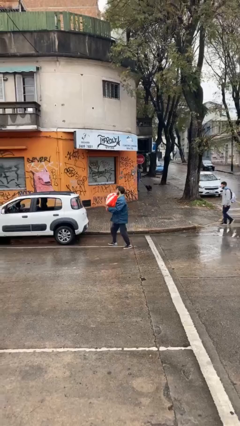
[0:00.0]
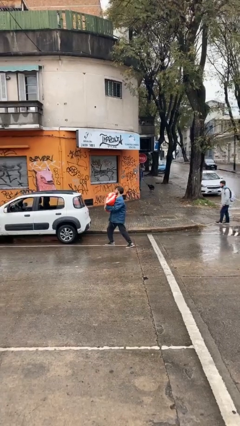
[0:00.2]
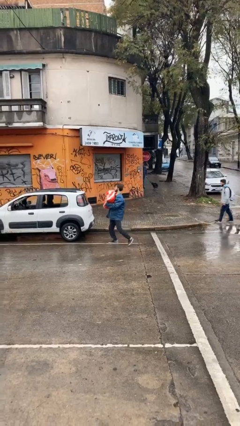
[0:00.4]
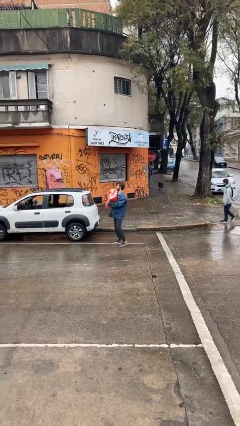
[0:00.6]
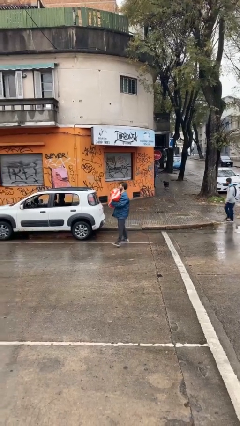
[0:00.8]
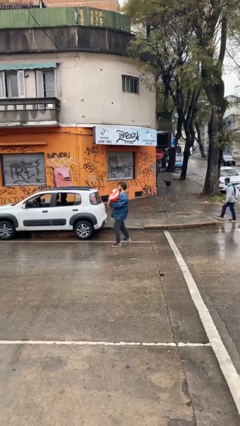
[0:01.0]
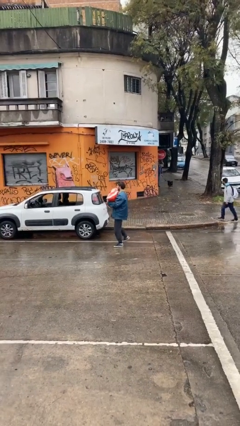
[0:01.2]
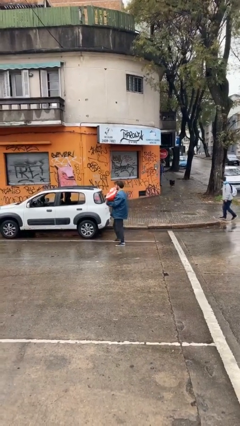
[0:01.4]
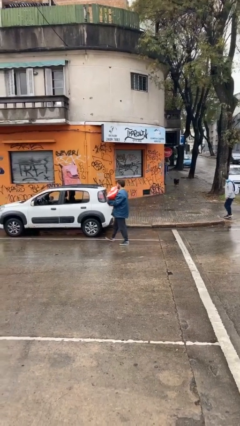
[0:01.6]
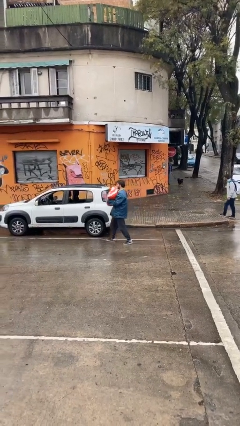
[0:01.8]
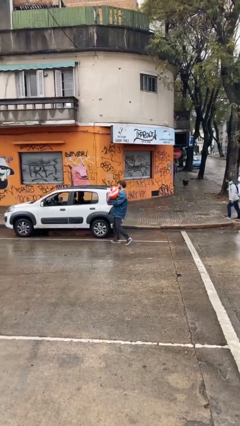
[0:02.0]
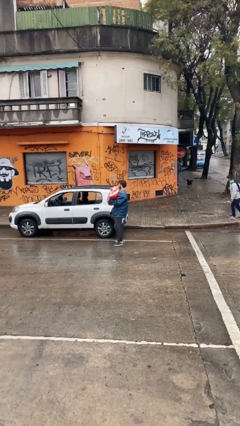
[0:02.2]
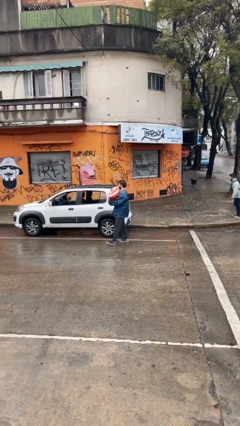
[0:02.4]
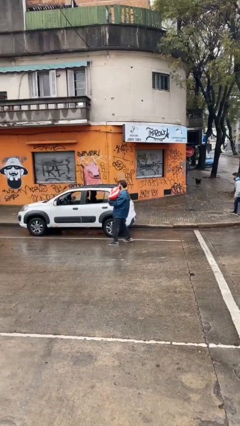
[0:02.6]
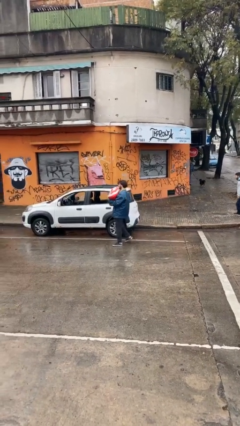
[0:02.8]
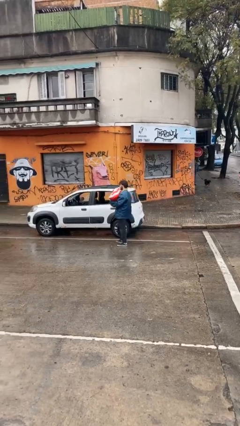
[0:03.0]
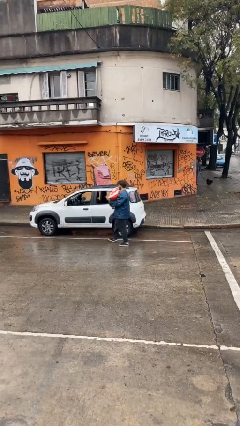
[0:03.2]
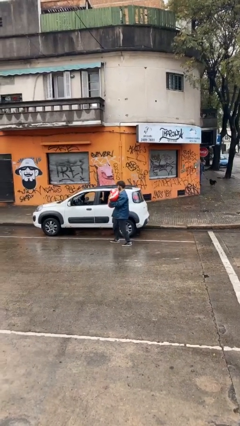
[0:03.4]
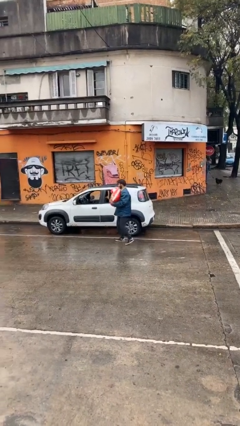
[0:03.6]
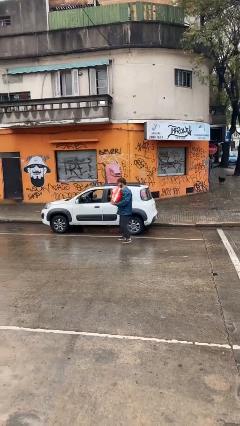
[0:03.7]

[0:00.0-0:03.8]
person carries heavy object

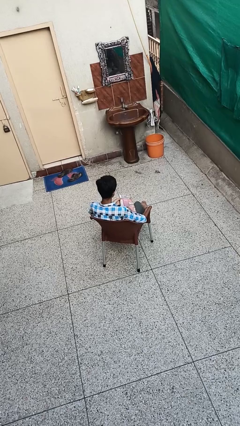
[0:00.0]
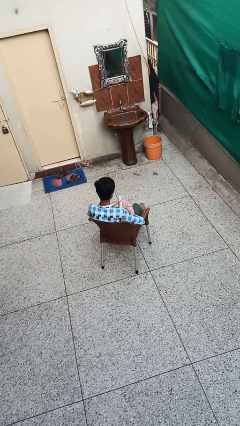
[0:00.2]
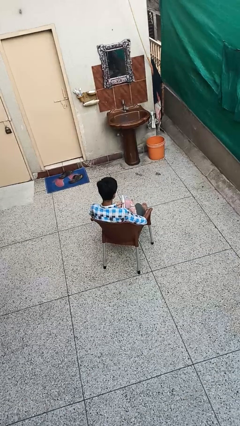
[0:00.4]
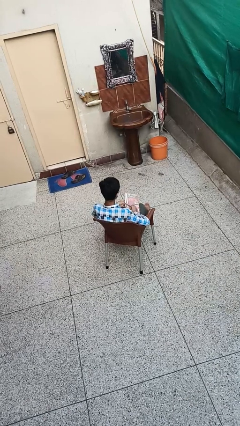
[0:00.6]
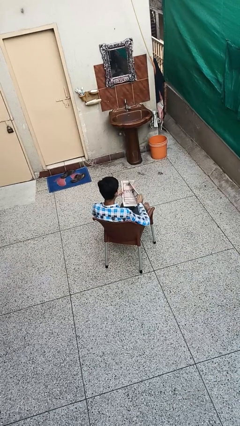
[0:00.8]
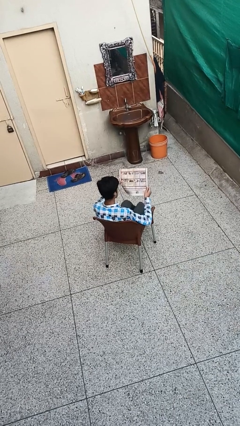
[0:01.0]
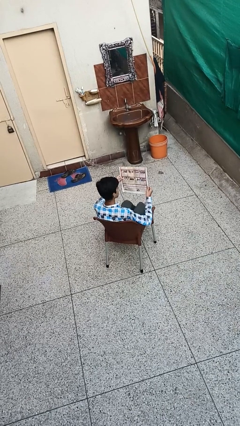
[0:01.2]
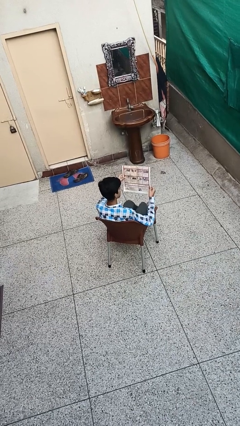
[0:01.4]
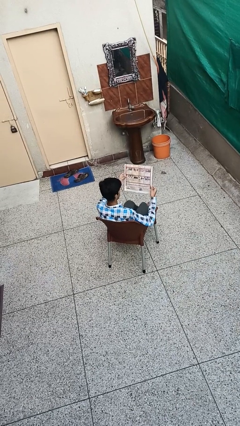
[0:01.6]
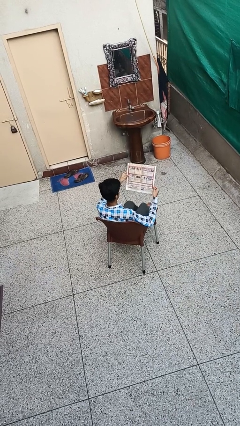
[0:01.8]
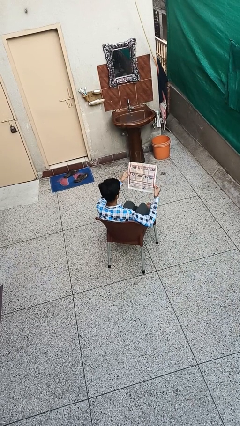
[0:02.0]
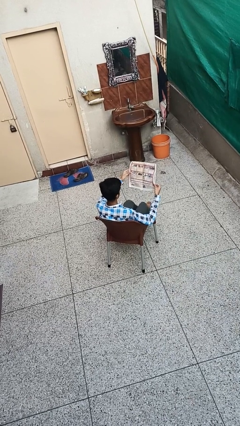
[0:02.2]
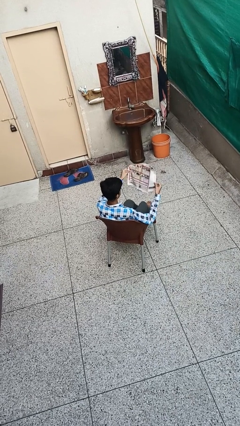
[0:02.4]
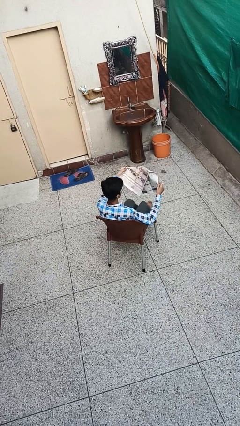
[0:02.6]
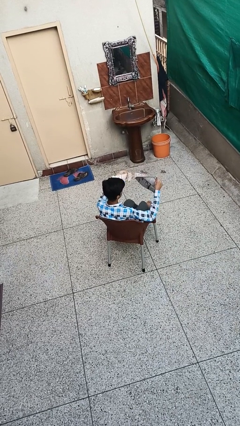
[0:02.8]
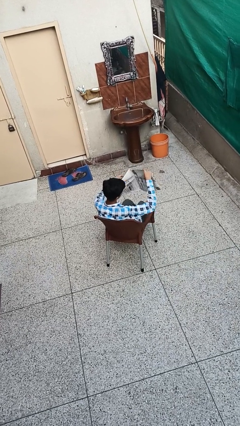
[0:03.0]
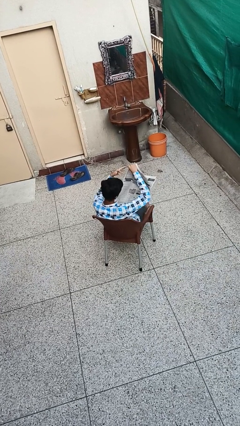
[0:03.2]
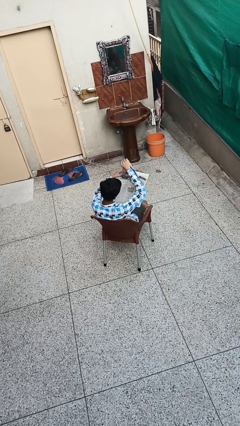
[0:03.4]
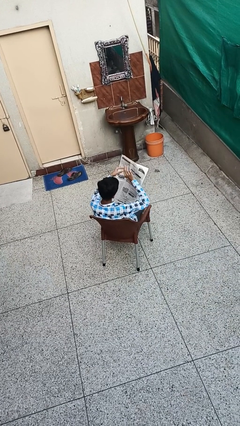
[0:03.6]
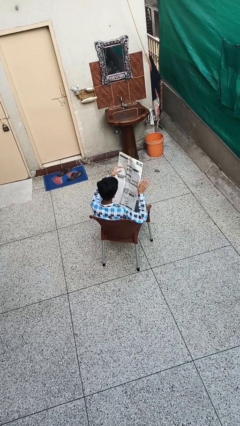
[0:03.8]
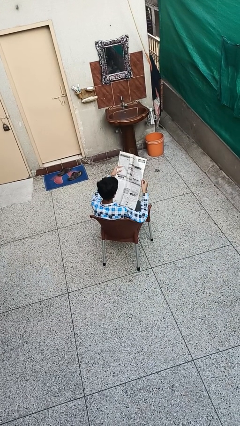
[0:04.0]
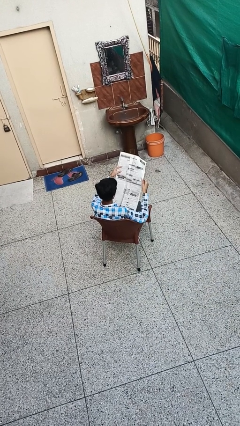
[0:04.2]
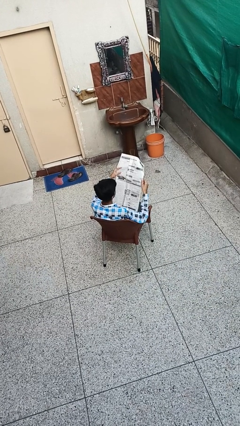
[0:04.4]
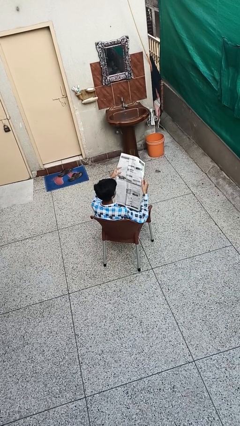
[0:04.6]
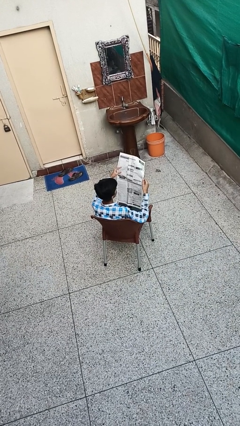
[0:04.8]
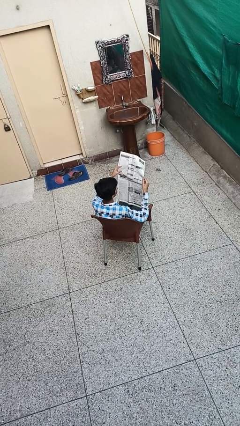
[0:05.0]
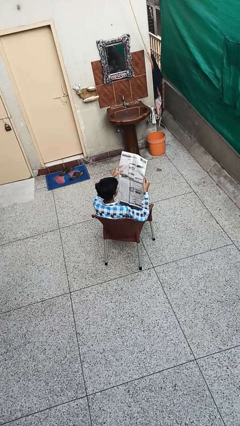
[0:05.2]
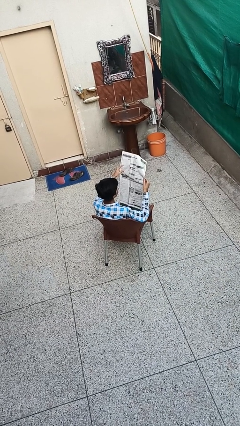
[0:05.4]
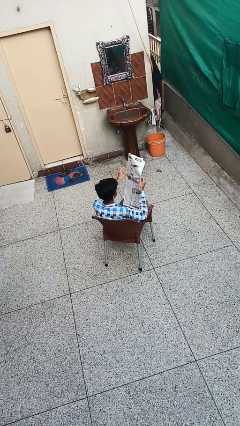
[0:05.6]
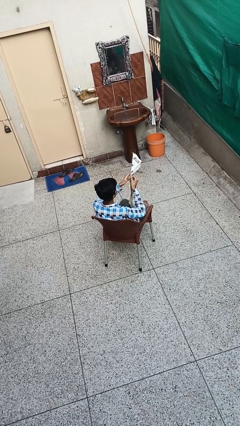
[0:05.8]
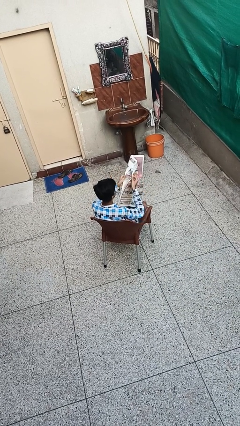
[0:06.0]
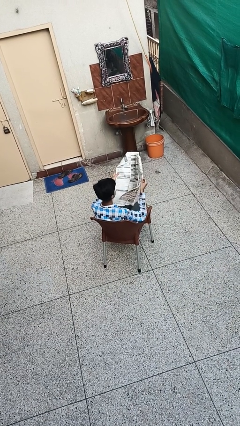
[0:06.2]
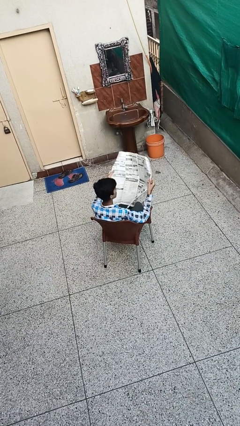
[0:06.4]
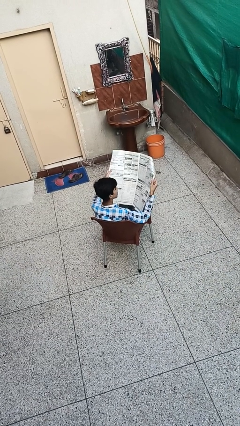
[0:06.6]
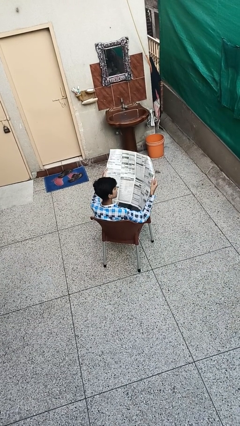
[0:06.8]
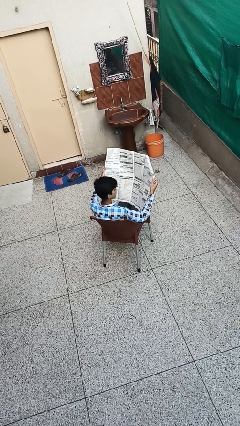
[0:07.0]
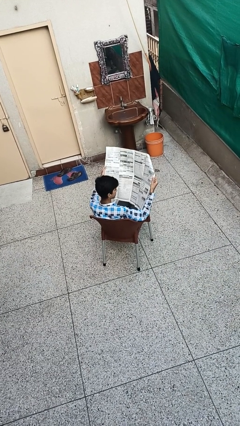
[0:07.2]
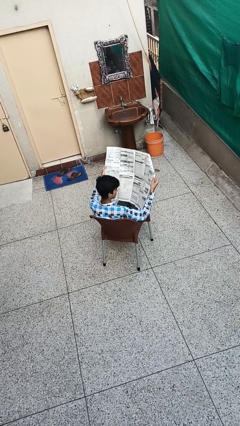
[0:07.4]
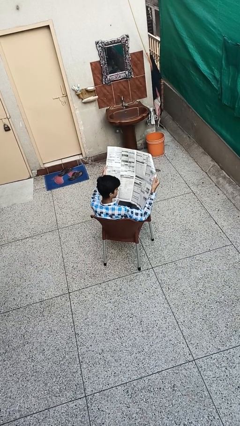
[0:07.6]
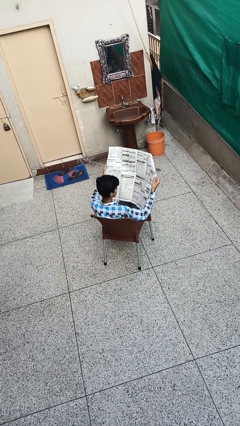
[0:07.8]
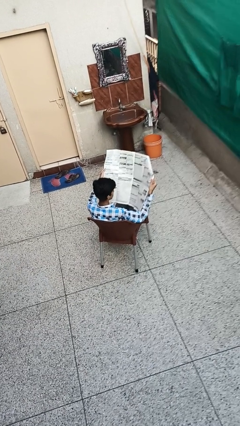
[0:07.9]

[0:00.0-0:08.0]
person reads newspaper

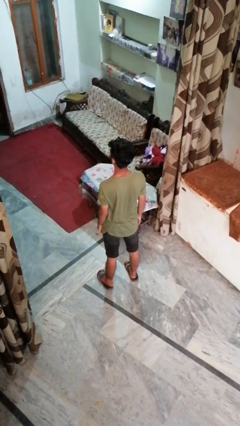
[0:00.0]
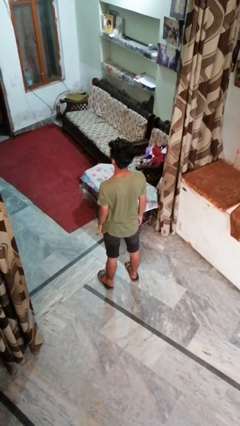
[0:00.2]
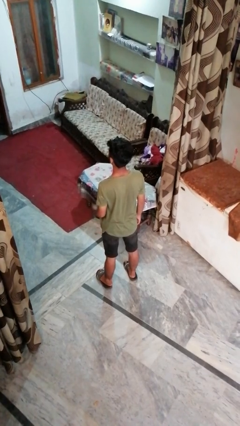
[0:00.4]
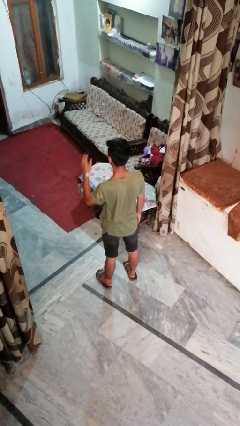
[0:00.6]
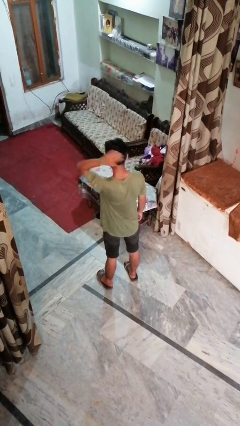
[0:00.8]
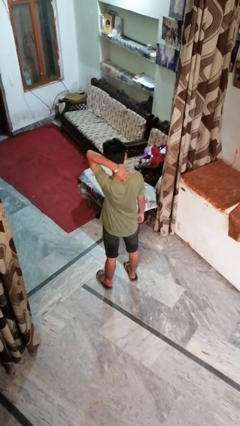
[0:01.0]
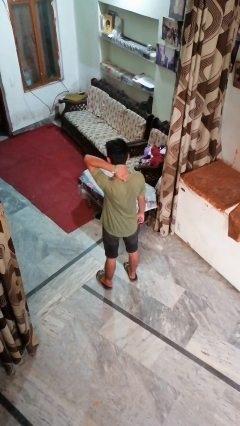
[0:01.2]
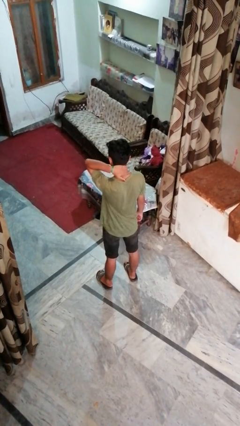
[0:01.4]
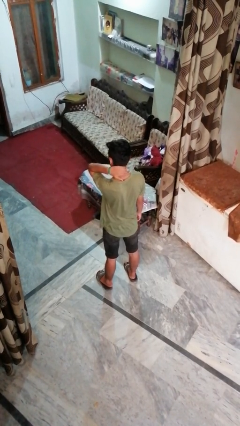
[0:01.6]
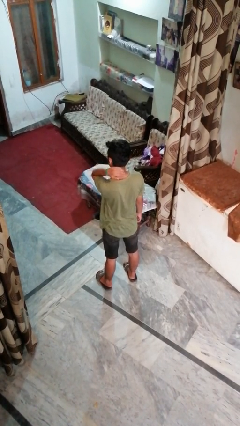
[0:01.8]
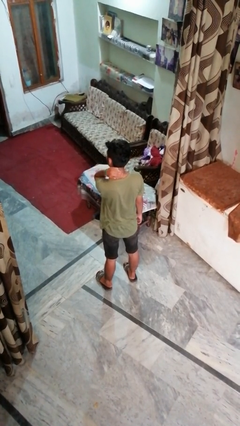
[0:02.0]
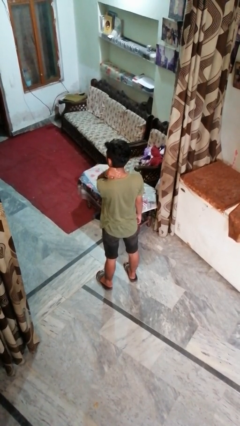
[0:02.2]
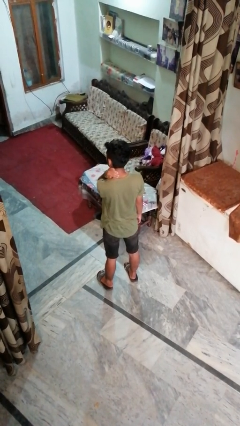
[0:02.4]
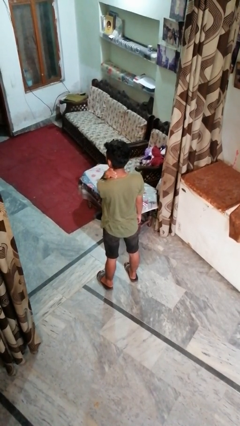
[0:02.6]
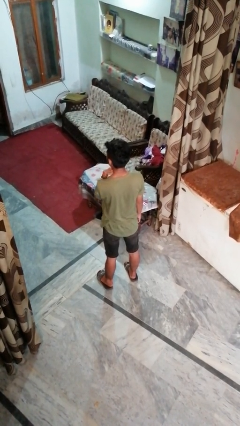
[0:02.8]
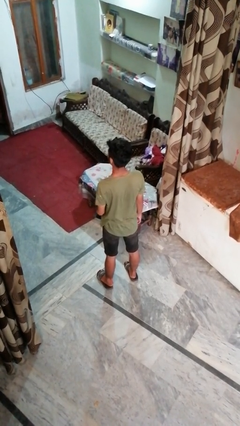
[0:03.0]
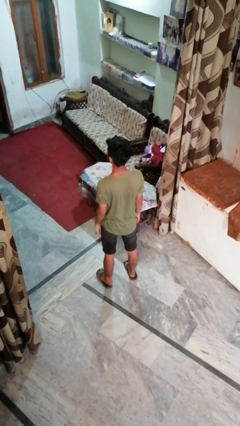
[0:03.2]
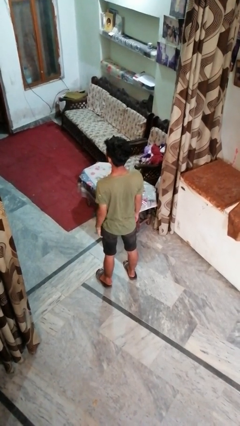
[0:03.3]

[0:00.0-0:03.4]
person rubs neck

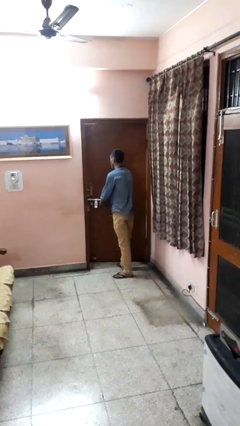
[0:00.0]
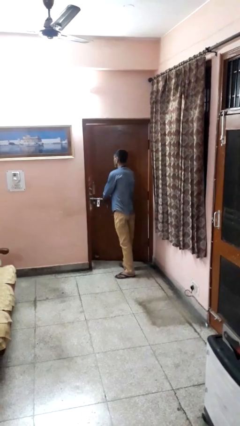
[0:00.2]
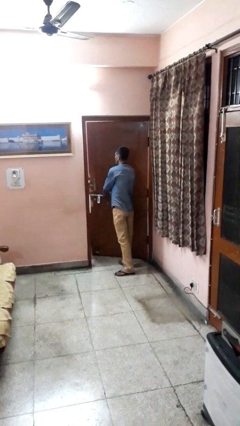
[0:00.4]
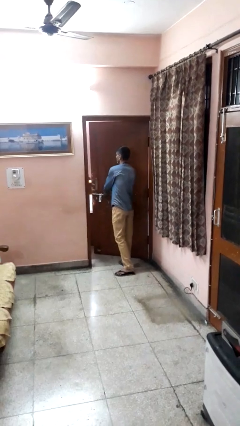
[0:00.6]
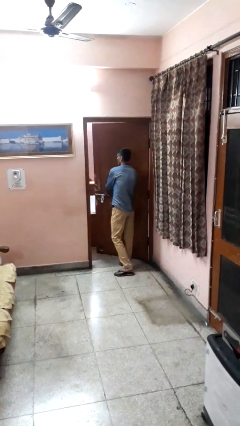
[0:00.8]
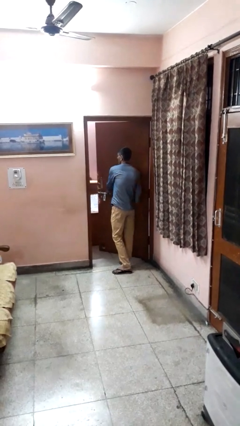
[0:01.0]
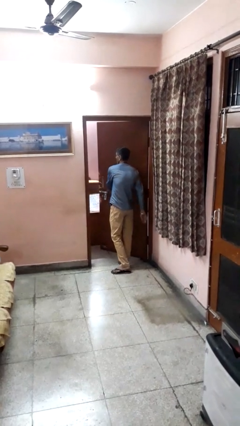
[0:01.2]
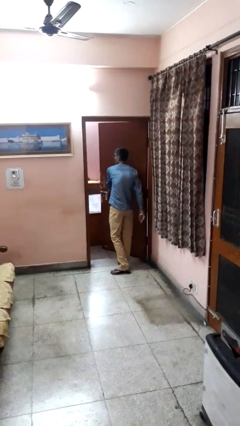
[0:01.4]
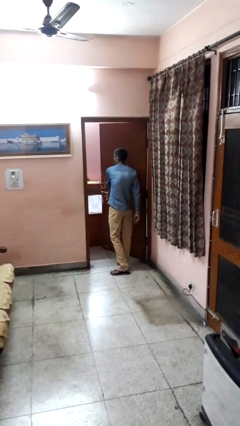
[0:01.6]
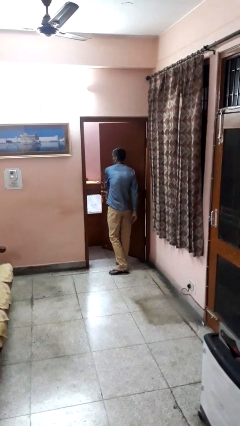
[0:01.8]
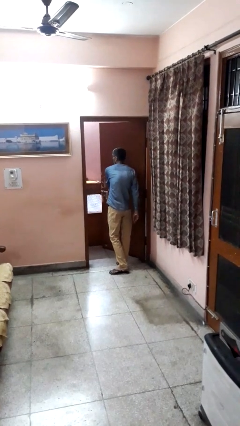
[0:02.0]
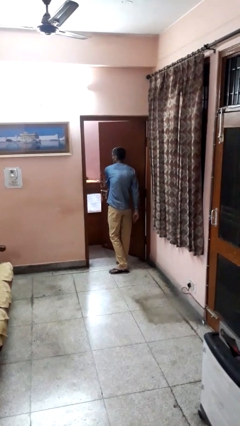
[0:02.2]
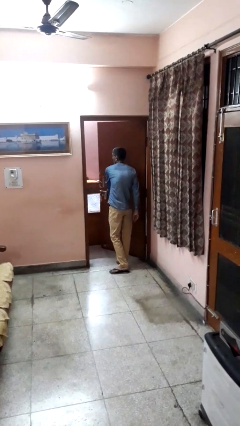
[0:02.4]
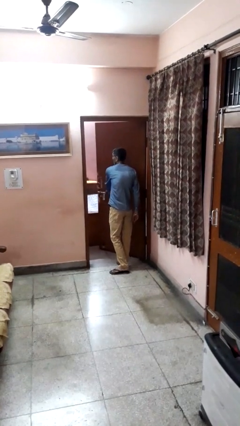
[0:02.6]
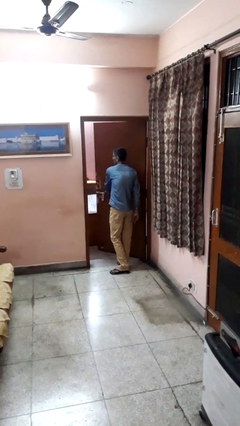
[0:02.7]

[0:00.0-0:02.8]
person opens facility door
